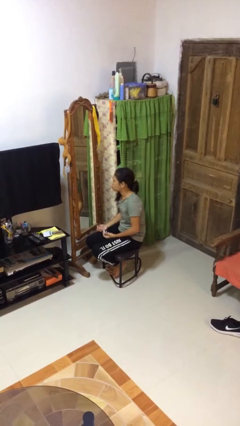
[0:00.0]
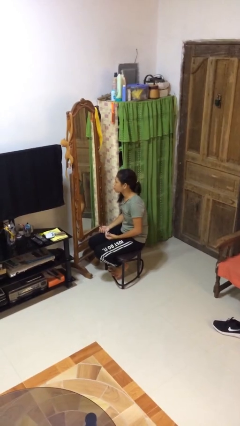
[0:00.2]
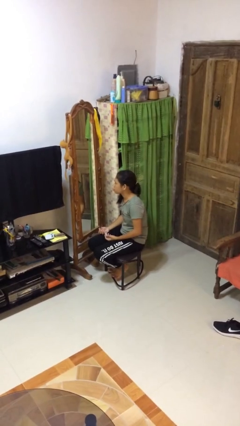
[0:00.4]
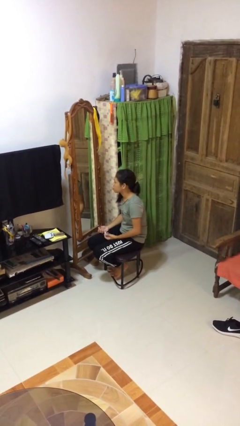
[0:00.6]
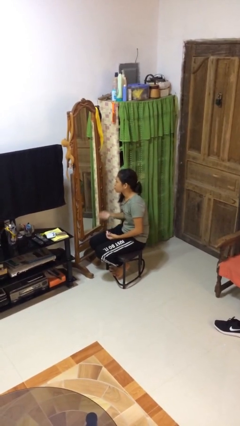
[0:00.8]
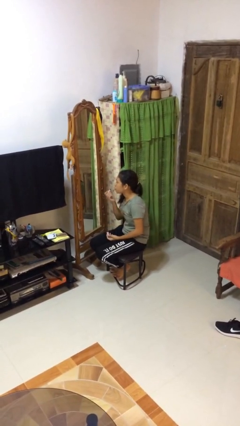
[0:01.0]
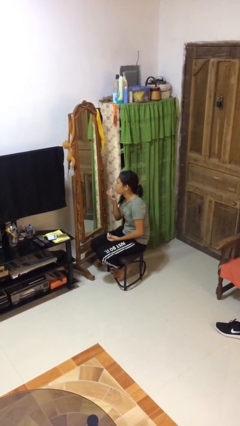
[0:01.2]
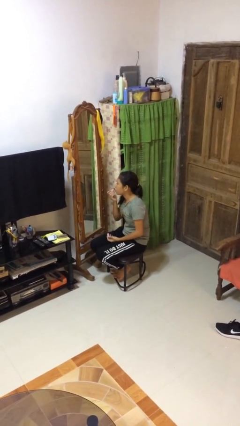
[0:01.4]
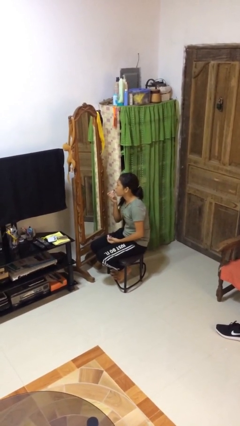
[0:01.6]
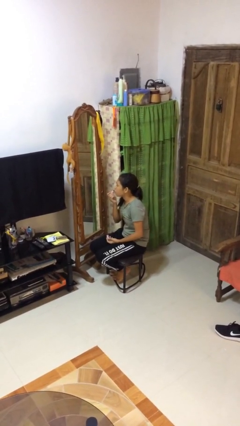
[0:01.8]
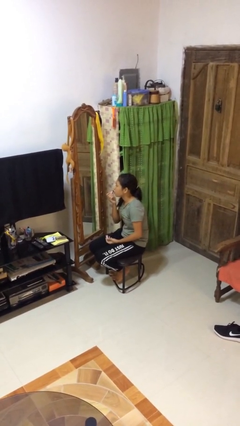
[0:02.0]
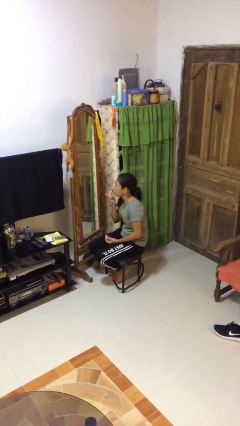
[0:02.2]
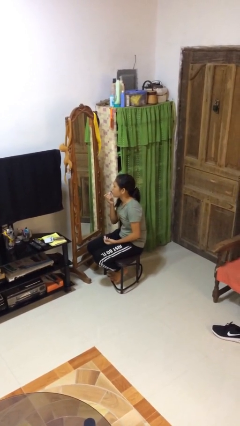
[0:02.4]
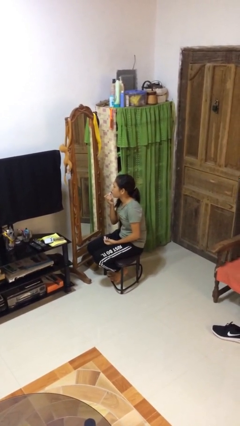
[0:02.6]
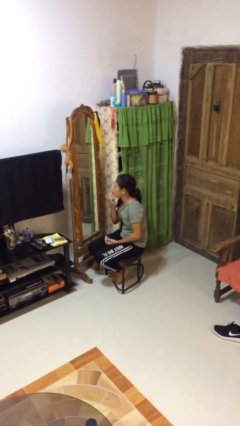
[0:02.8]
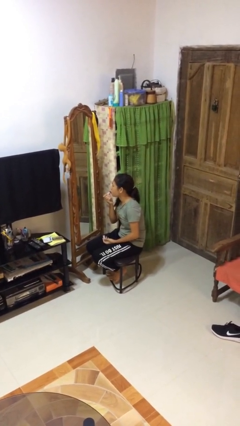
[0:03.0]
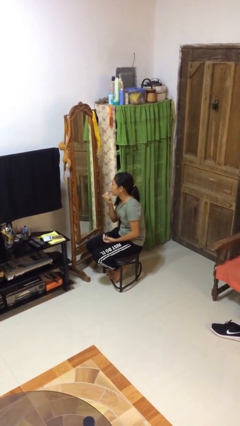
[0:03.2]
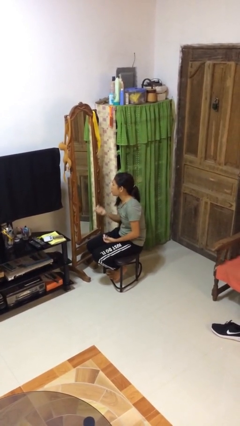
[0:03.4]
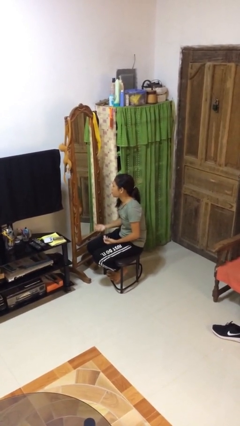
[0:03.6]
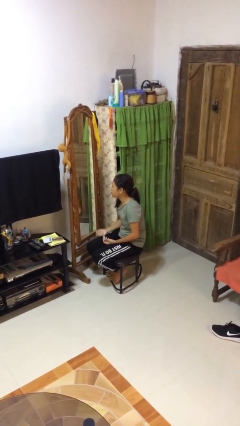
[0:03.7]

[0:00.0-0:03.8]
person applies lip makeup

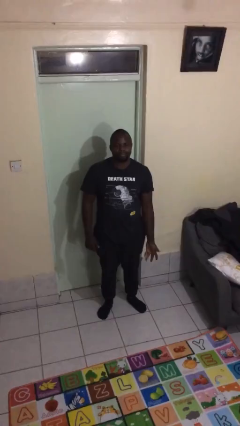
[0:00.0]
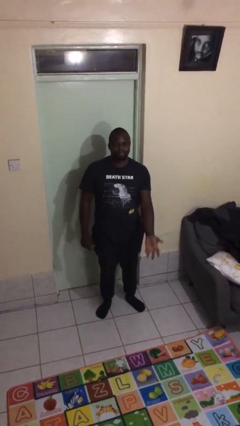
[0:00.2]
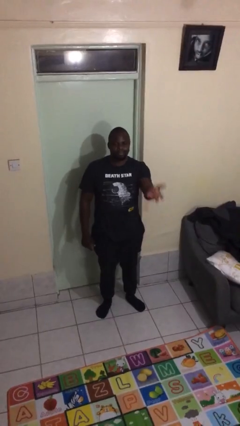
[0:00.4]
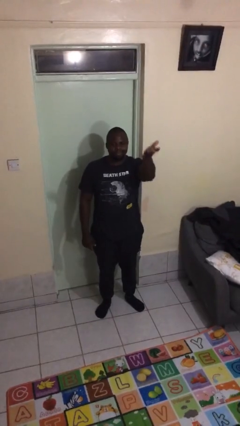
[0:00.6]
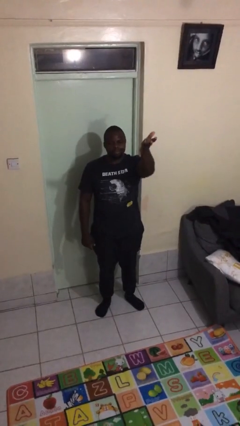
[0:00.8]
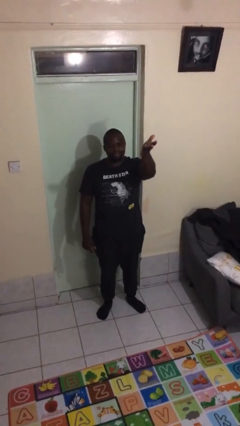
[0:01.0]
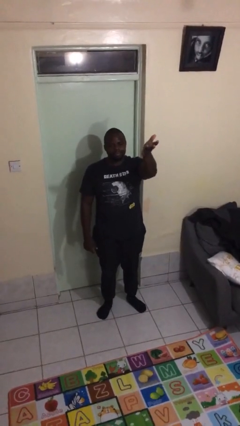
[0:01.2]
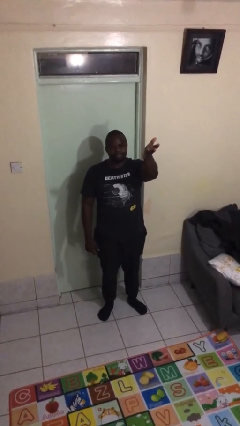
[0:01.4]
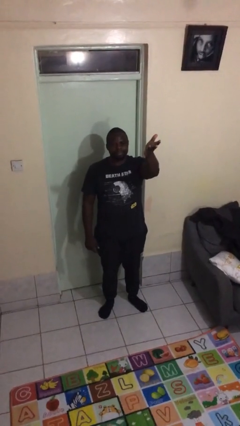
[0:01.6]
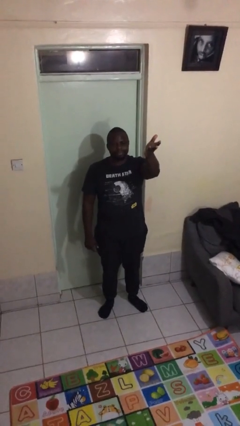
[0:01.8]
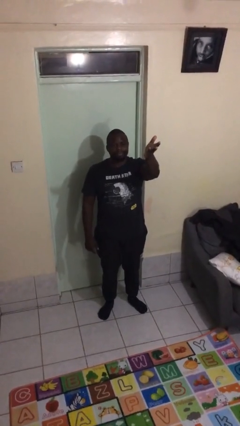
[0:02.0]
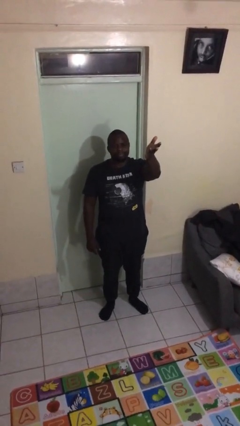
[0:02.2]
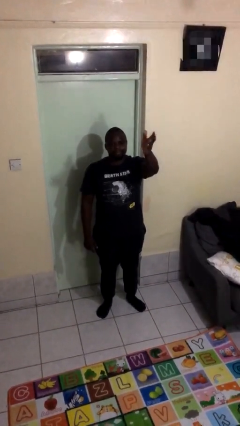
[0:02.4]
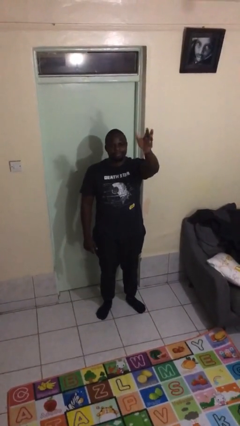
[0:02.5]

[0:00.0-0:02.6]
person gestures swipe up

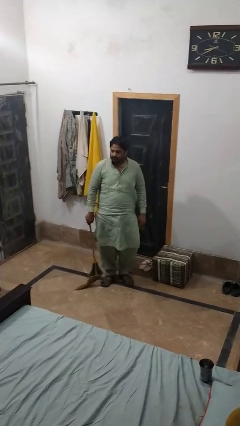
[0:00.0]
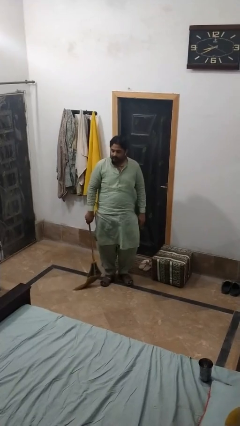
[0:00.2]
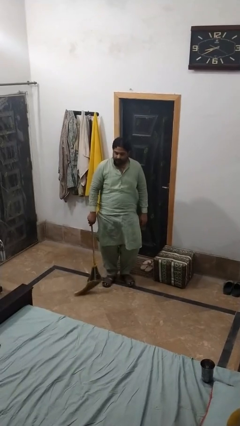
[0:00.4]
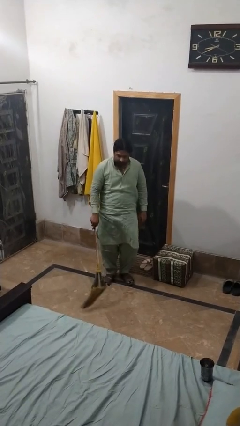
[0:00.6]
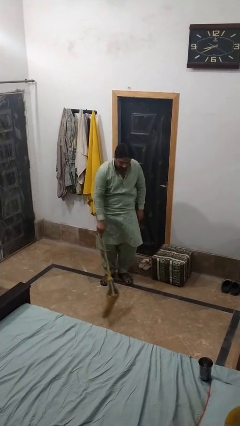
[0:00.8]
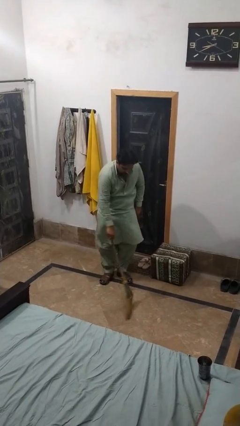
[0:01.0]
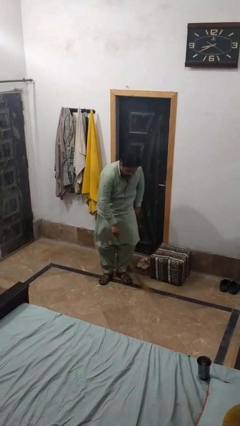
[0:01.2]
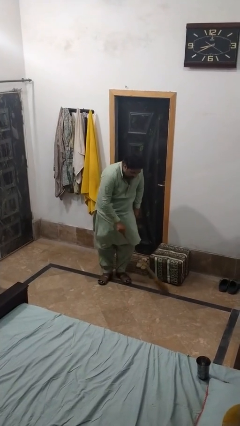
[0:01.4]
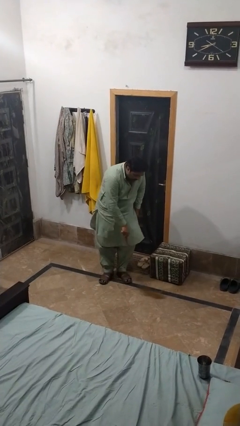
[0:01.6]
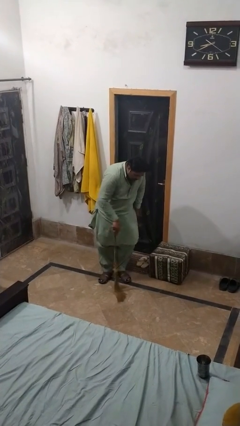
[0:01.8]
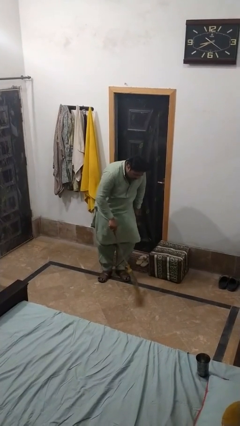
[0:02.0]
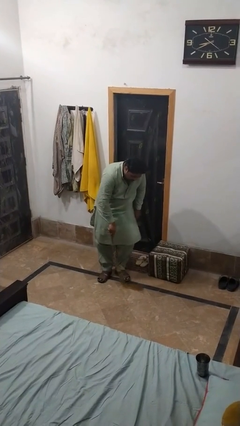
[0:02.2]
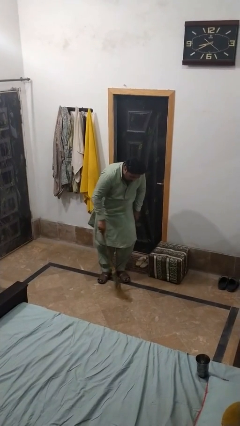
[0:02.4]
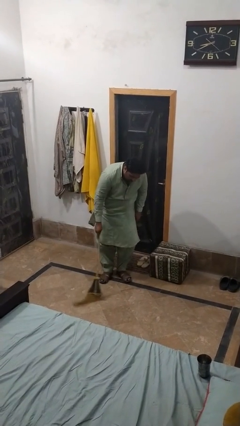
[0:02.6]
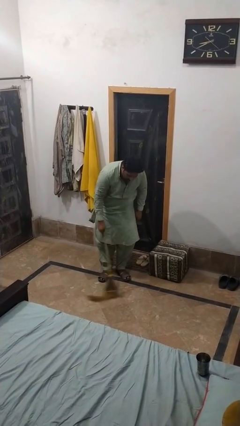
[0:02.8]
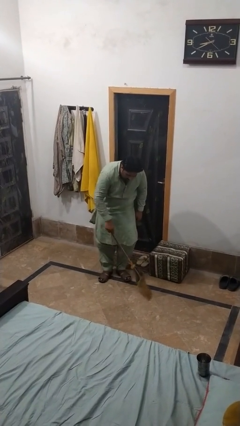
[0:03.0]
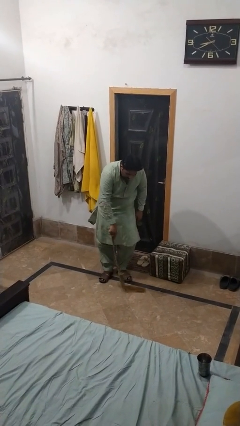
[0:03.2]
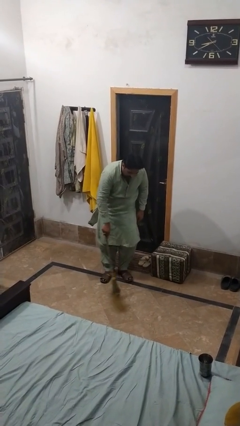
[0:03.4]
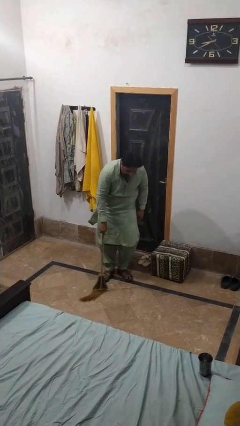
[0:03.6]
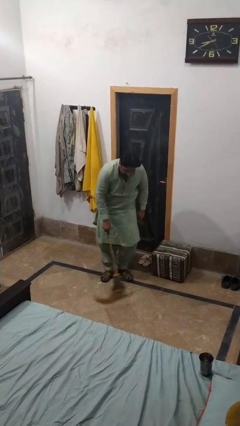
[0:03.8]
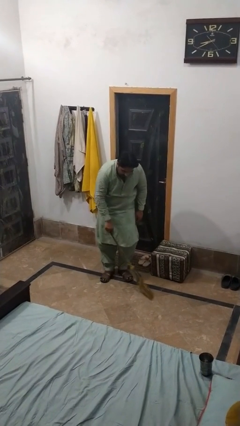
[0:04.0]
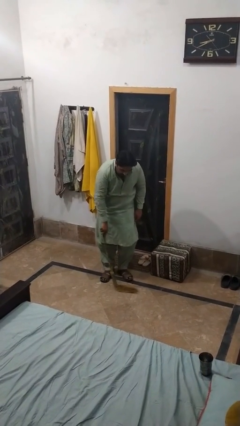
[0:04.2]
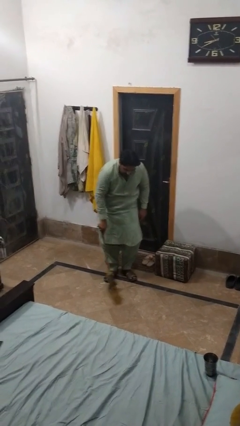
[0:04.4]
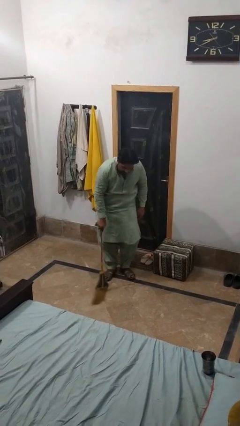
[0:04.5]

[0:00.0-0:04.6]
person mops

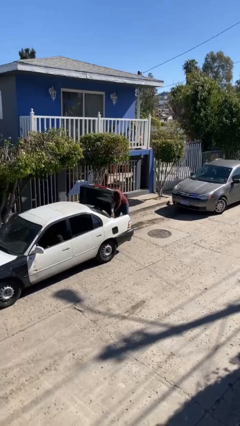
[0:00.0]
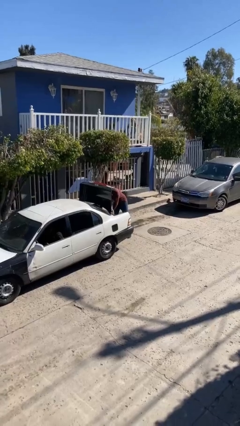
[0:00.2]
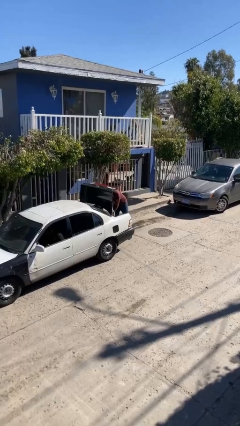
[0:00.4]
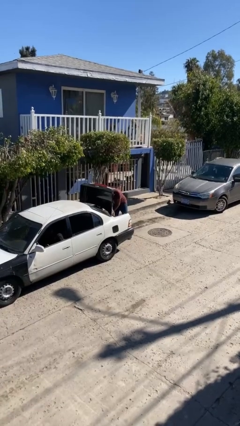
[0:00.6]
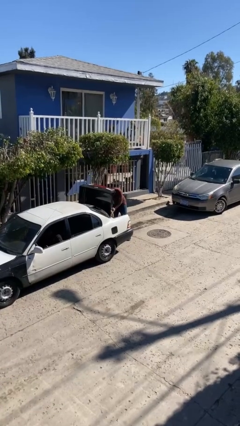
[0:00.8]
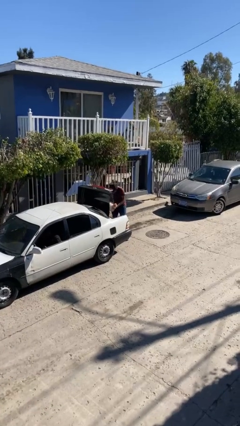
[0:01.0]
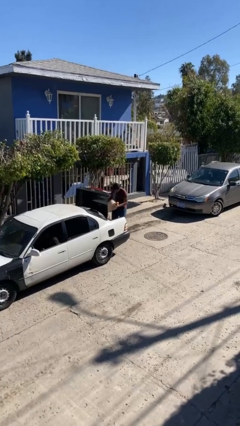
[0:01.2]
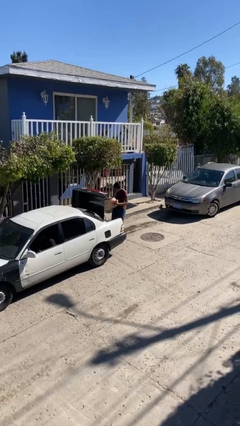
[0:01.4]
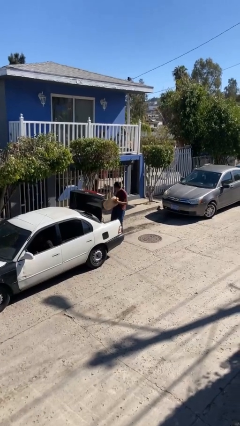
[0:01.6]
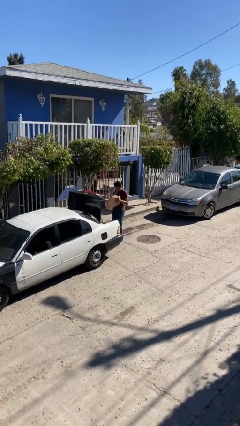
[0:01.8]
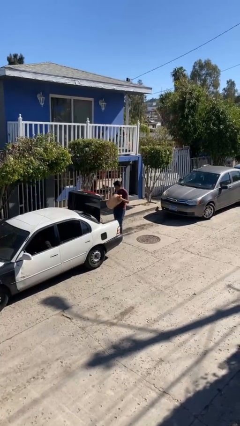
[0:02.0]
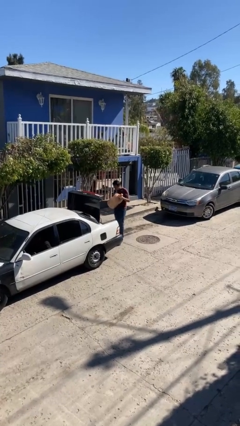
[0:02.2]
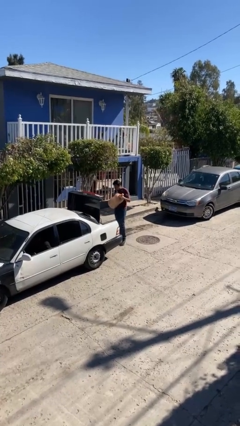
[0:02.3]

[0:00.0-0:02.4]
person unloads car

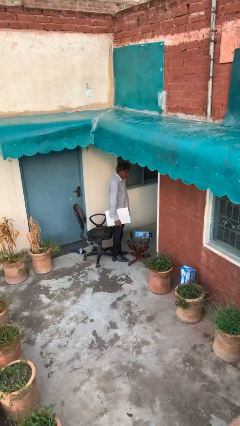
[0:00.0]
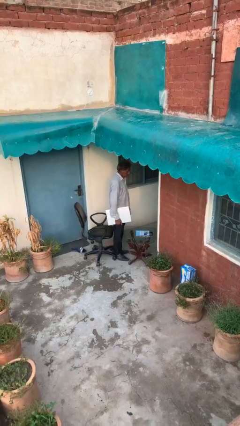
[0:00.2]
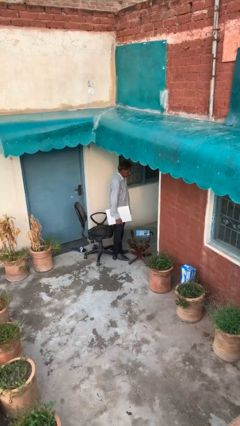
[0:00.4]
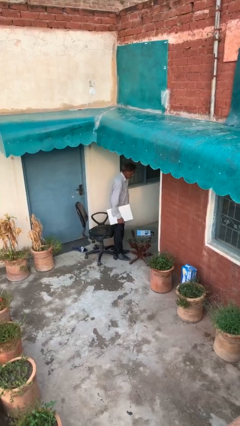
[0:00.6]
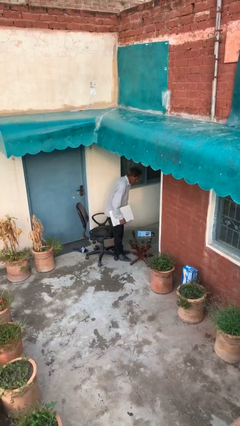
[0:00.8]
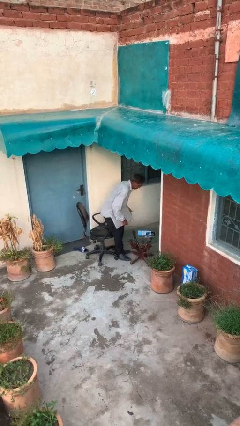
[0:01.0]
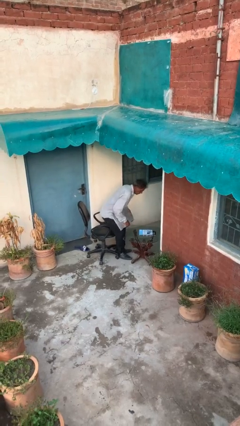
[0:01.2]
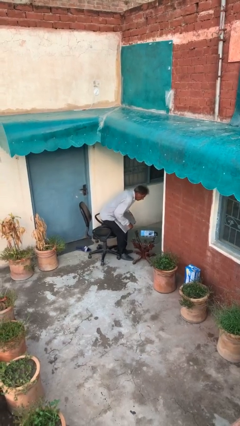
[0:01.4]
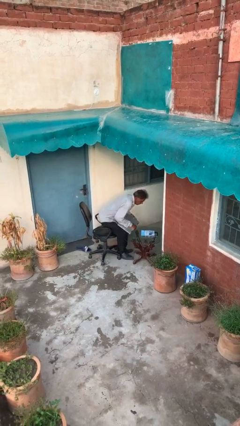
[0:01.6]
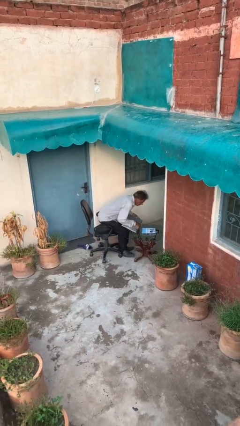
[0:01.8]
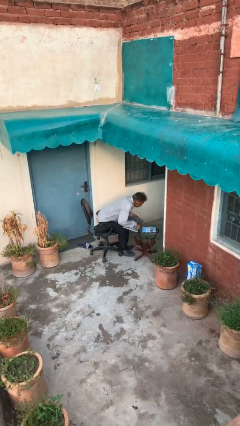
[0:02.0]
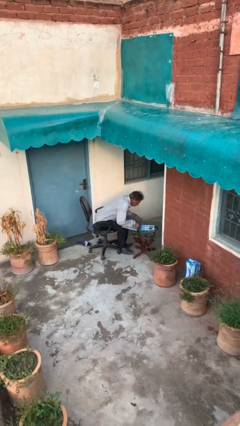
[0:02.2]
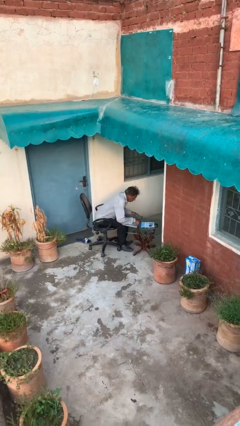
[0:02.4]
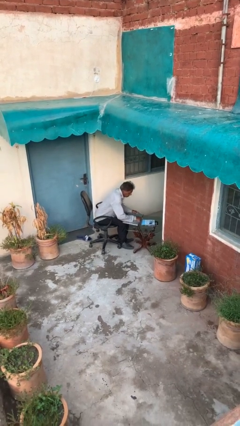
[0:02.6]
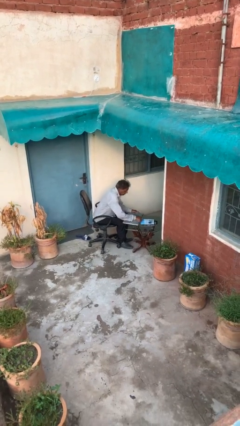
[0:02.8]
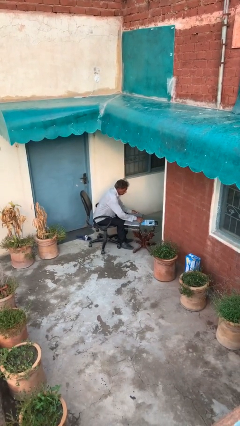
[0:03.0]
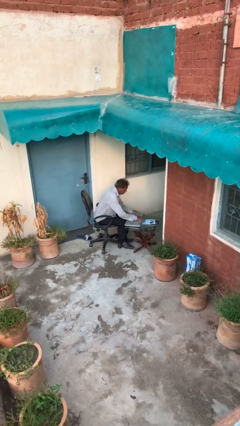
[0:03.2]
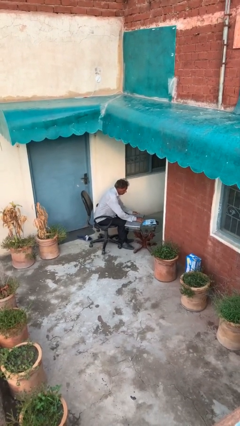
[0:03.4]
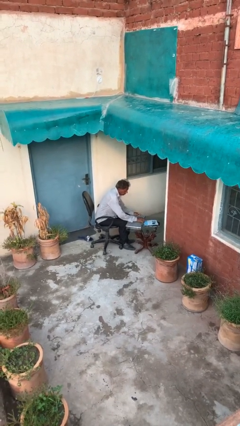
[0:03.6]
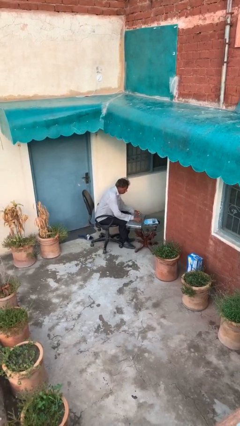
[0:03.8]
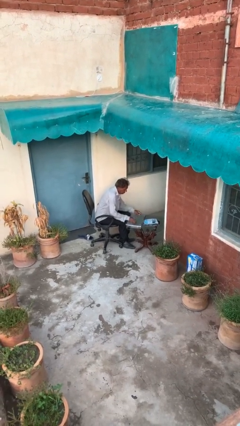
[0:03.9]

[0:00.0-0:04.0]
person sits down
